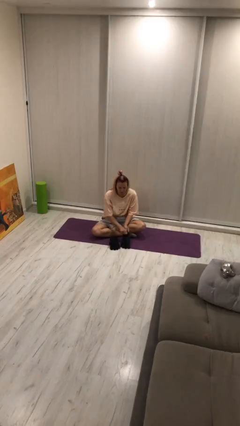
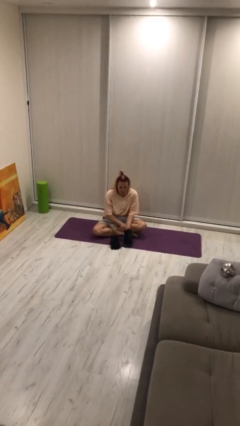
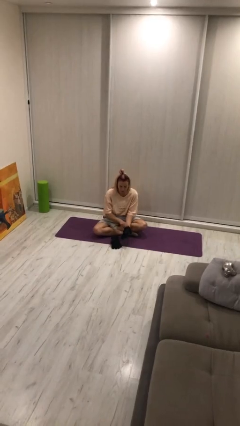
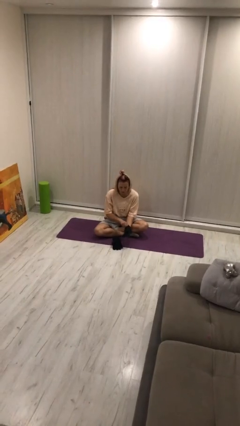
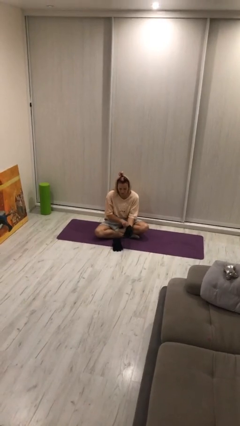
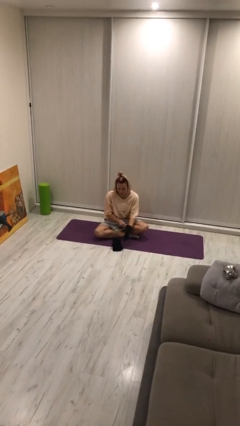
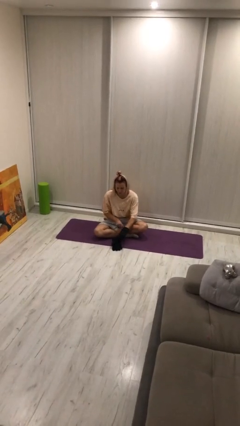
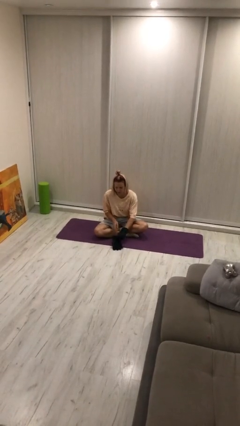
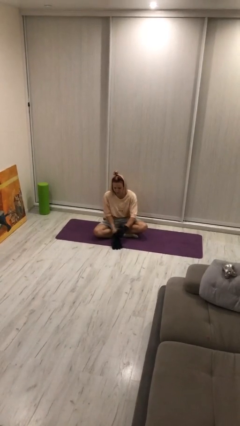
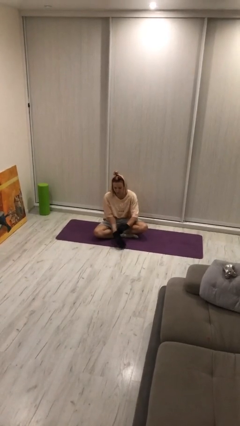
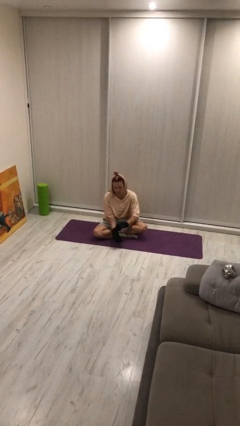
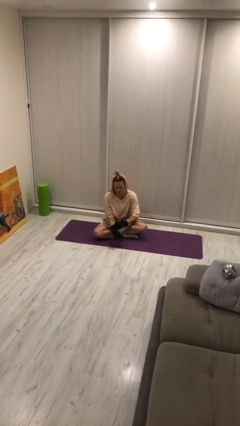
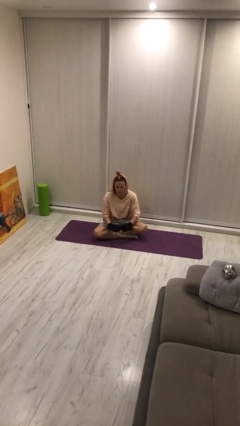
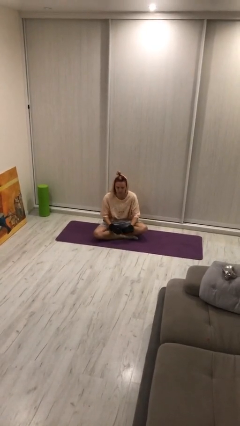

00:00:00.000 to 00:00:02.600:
person puts on gloves

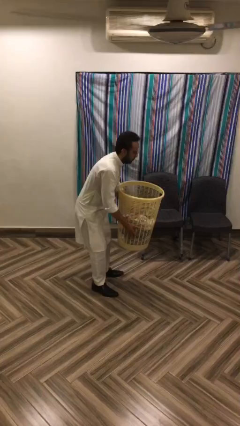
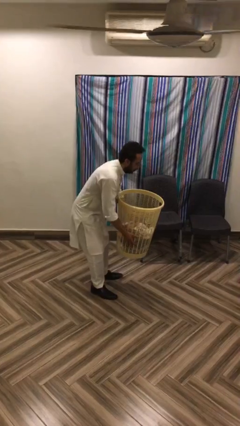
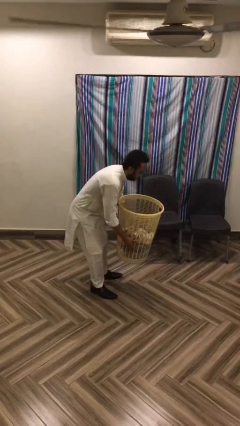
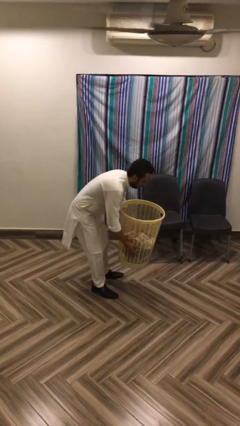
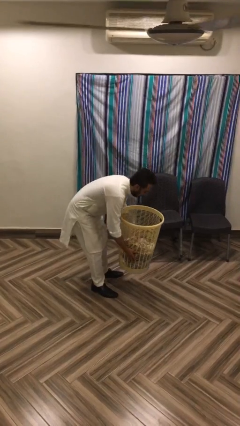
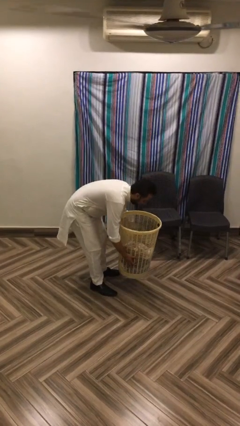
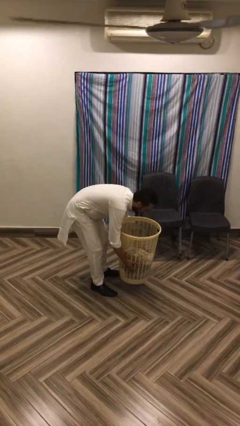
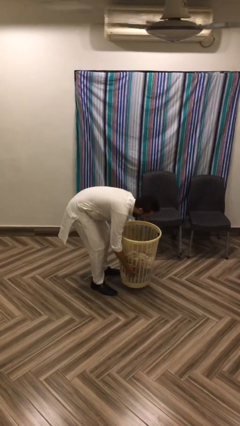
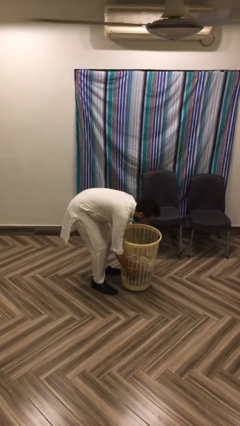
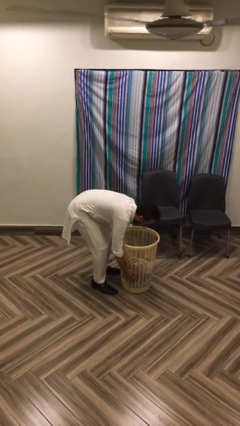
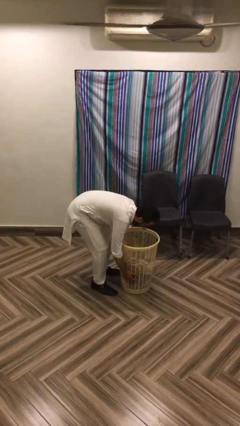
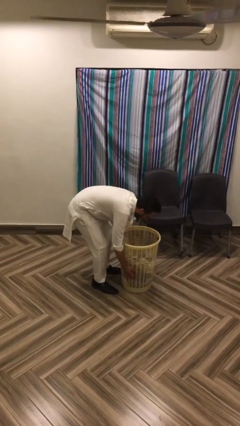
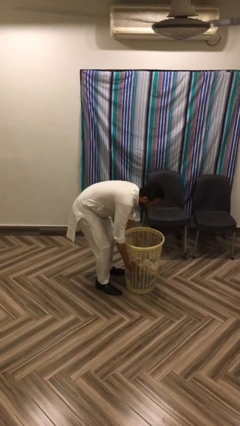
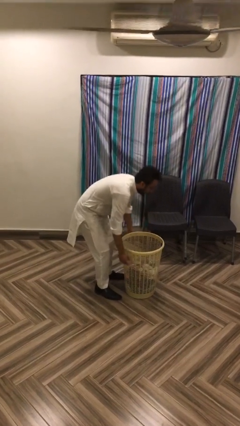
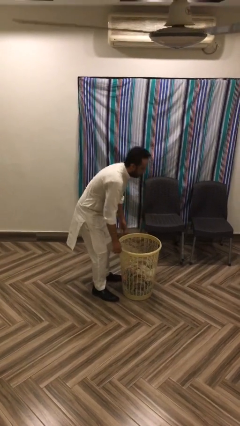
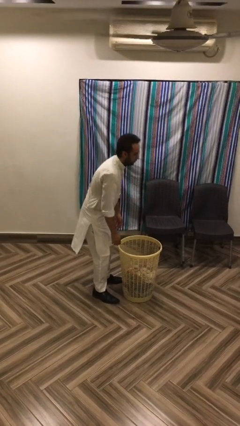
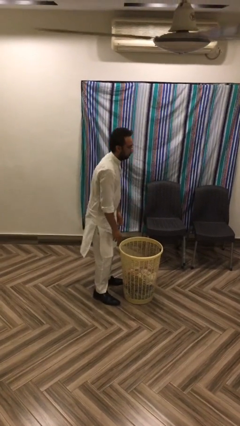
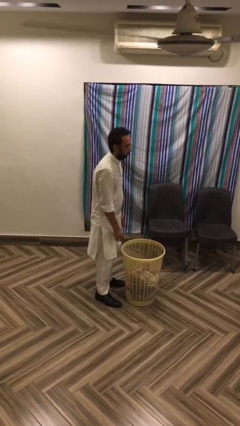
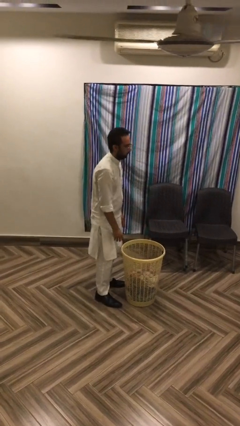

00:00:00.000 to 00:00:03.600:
person puts down object on floor

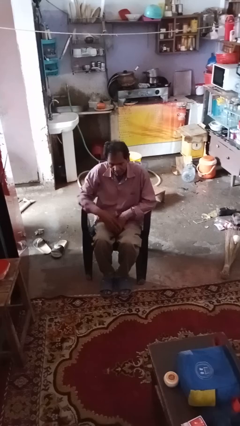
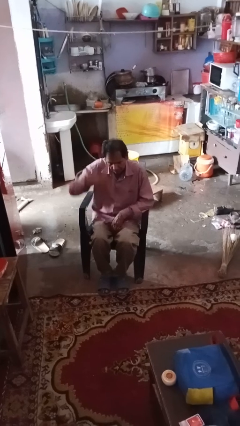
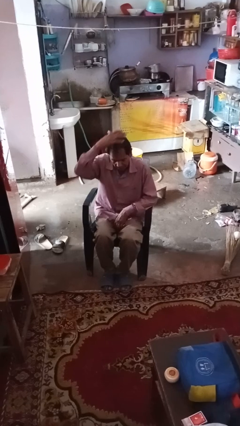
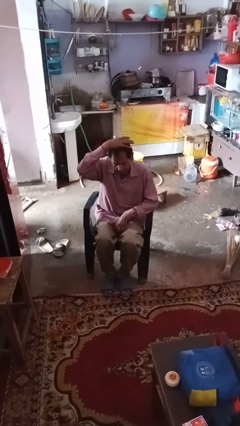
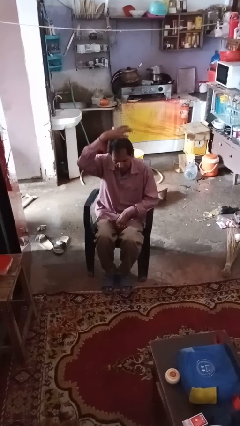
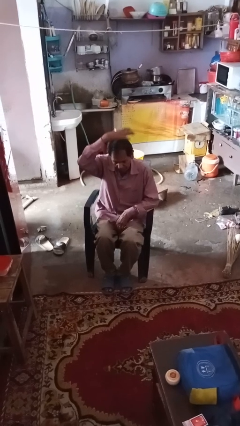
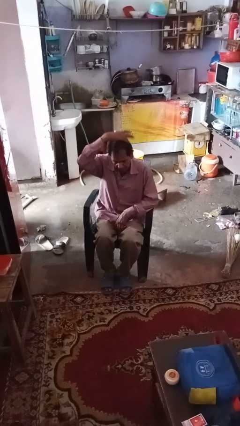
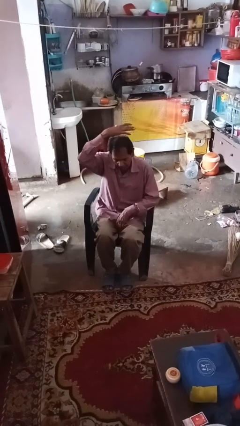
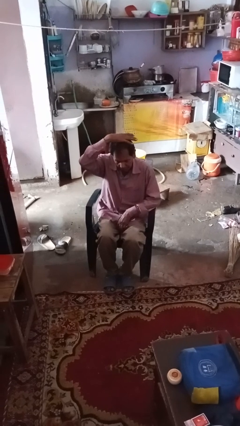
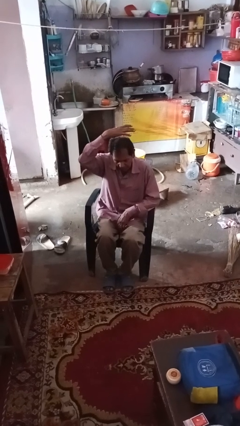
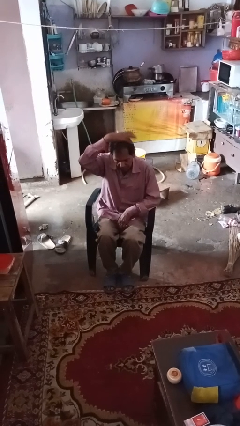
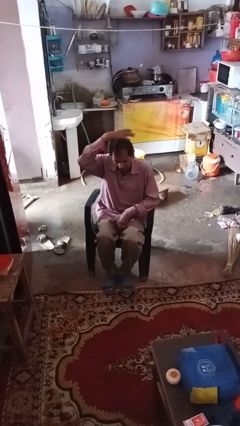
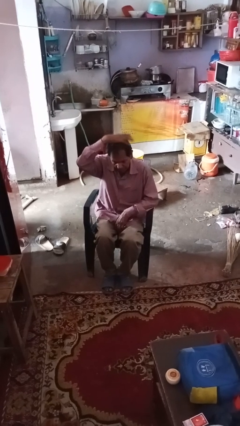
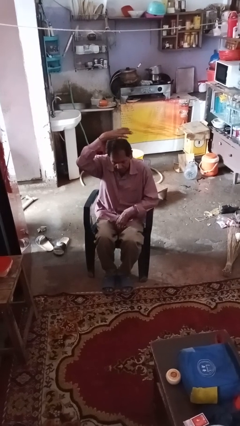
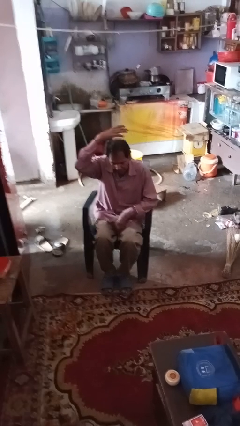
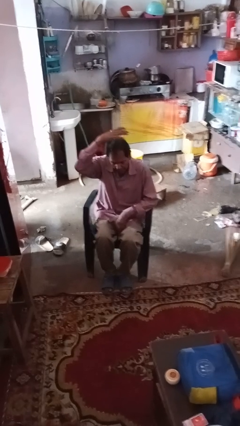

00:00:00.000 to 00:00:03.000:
person pats head

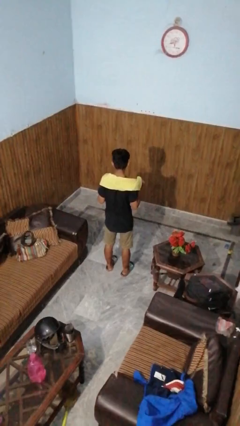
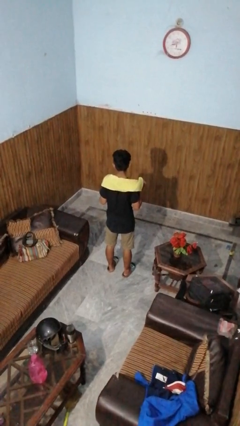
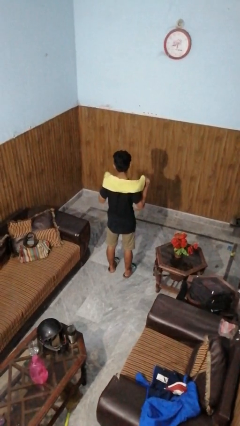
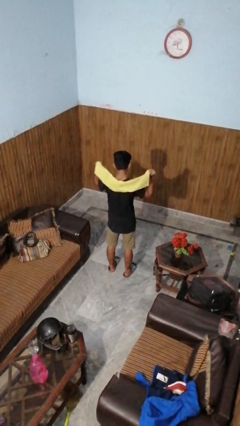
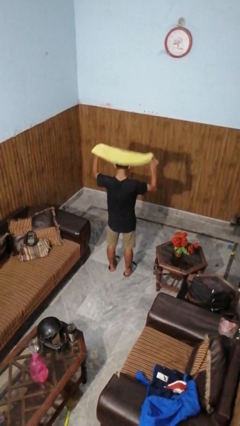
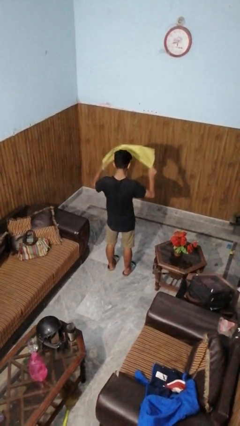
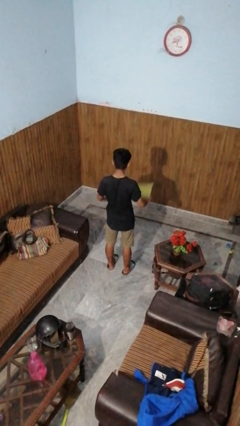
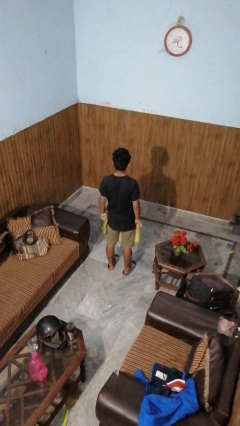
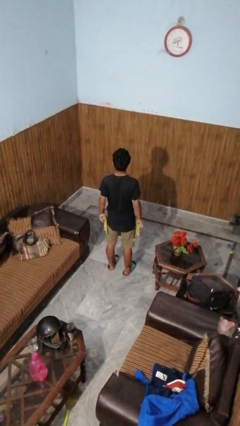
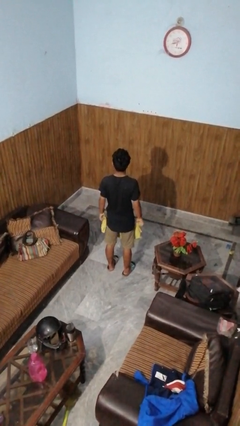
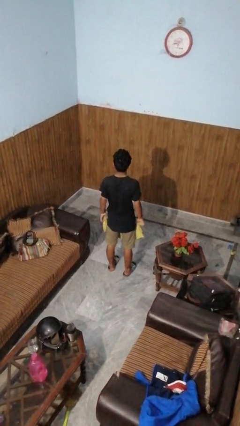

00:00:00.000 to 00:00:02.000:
person takes off scarf

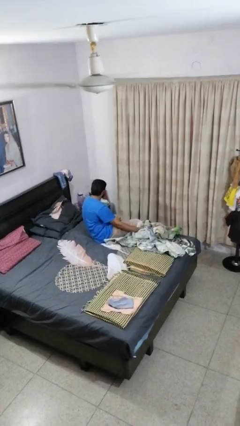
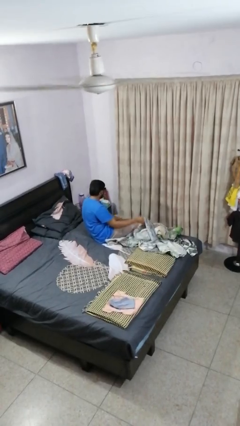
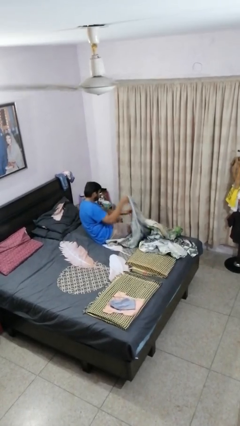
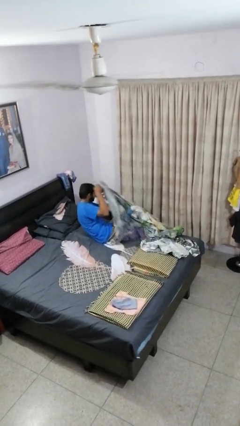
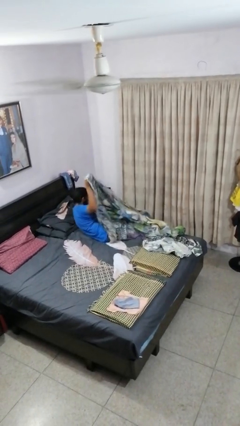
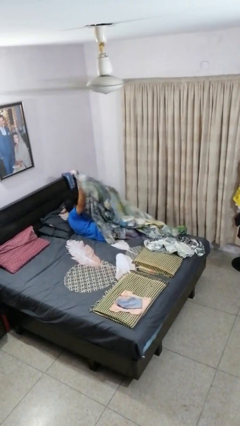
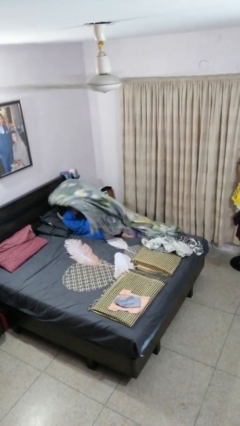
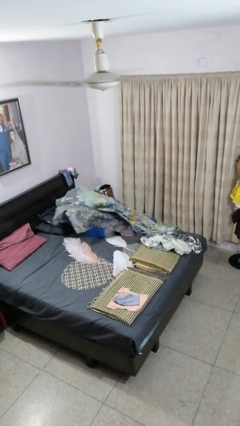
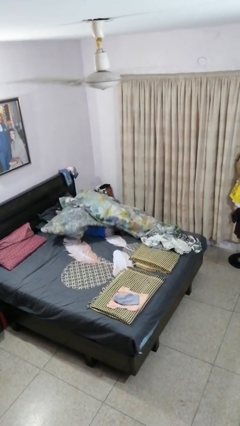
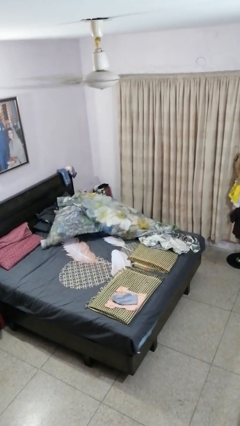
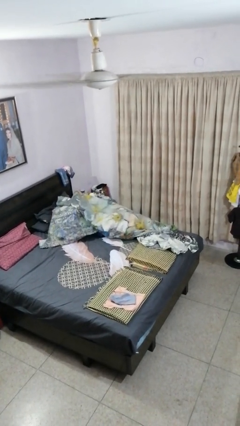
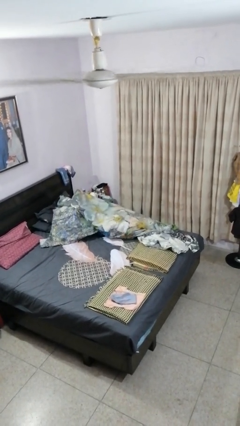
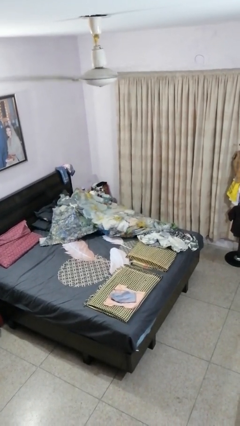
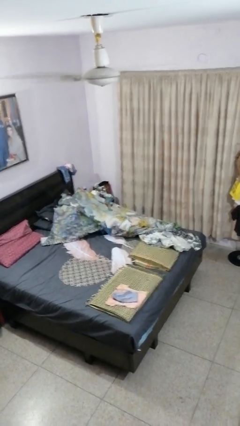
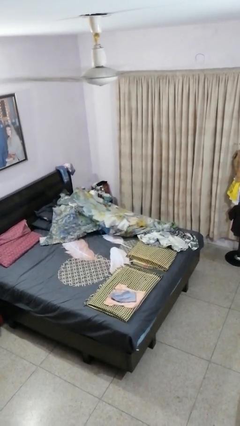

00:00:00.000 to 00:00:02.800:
person covers with bedsheets

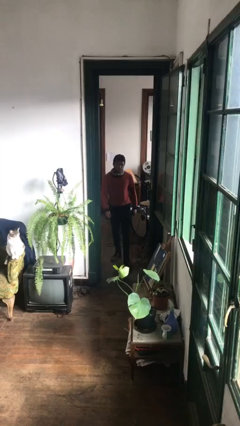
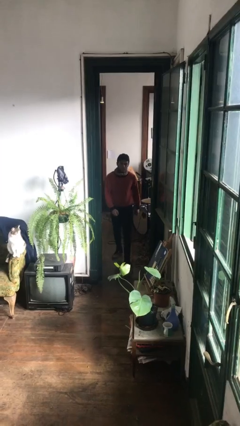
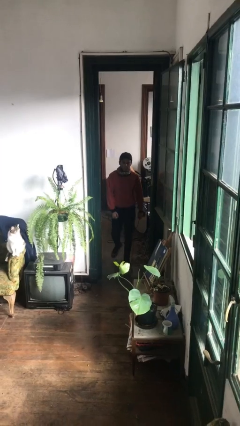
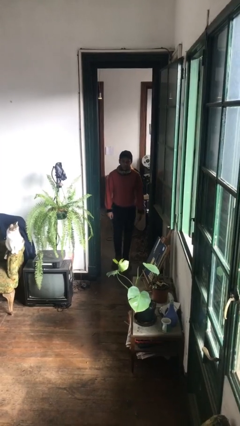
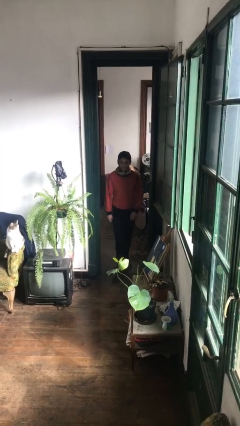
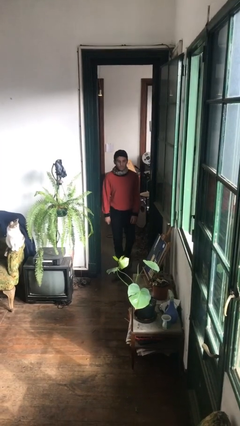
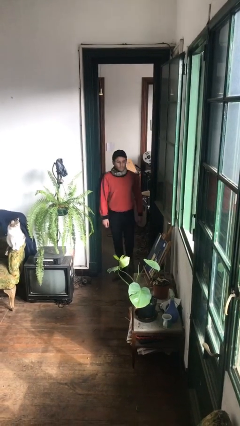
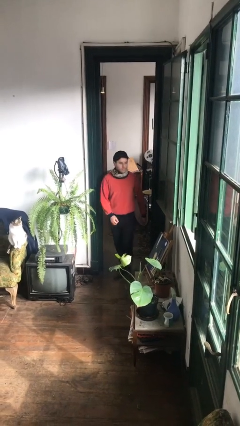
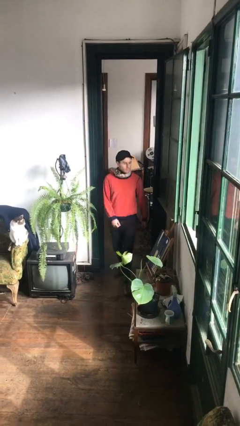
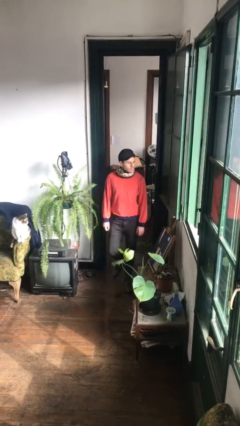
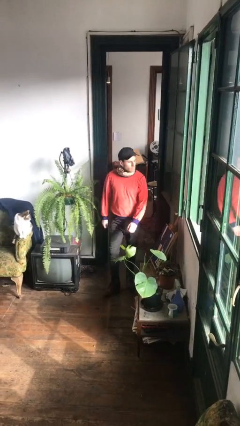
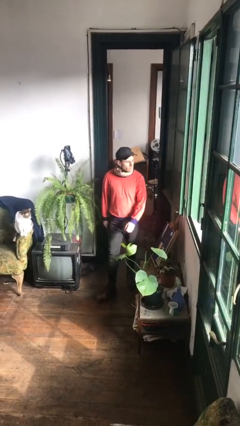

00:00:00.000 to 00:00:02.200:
person enters scene through structure

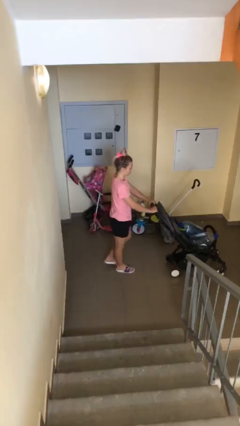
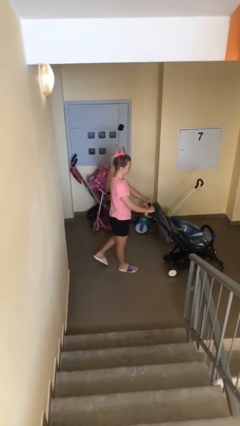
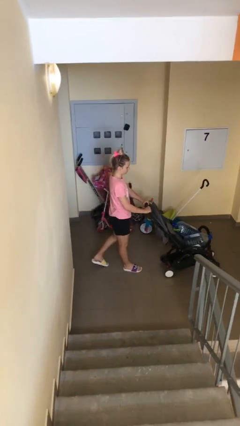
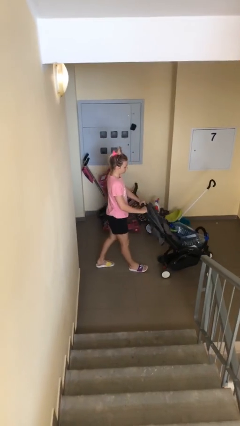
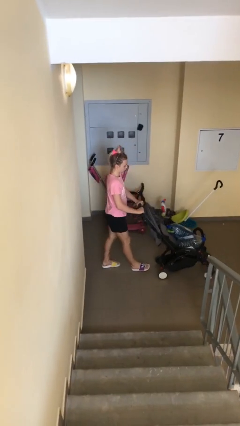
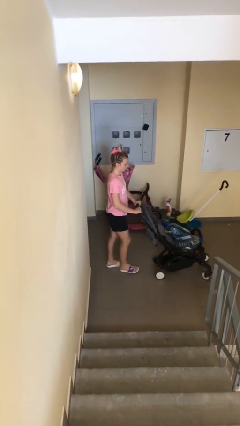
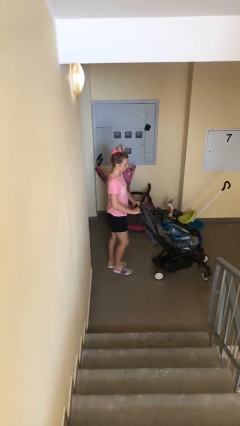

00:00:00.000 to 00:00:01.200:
person pulls wheeled cart
